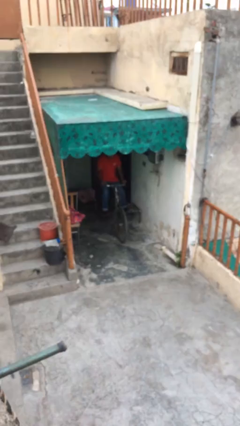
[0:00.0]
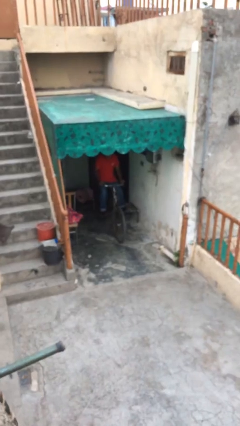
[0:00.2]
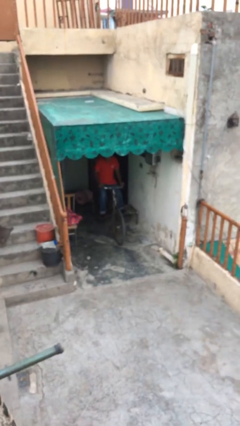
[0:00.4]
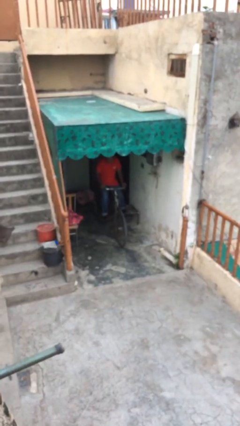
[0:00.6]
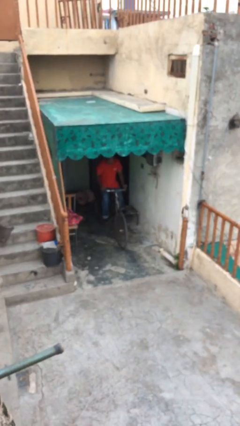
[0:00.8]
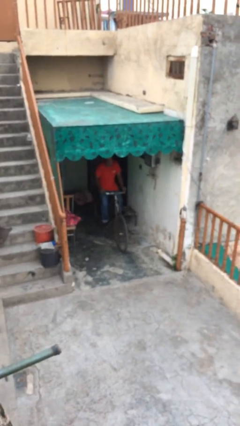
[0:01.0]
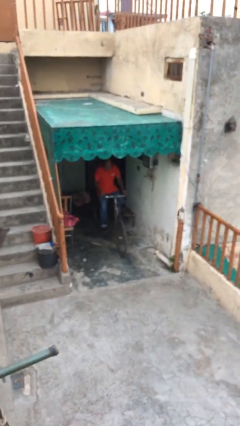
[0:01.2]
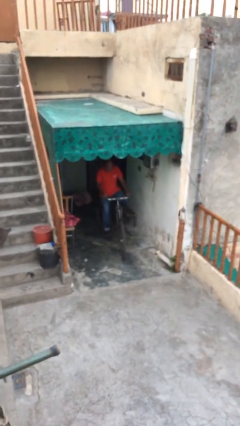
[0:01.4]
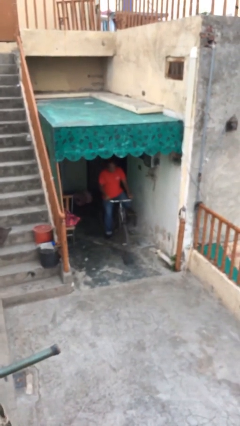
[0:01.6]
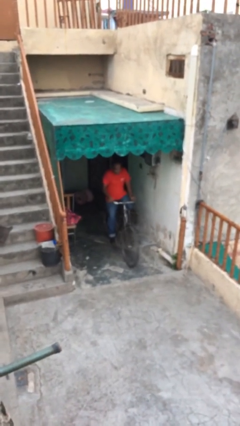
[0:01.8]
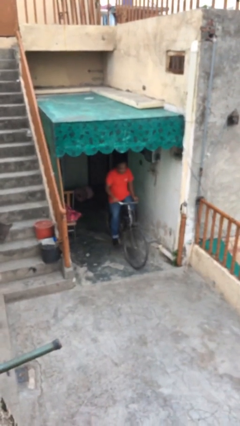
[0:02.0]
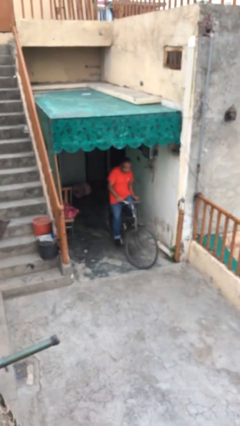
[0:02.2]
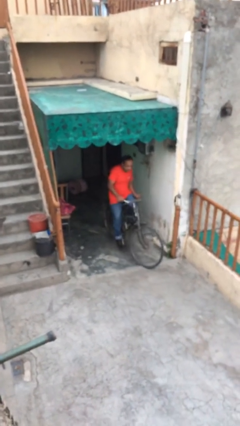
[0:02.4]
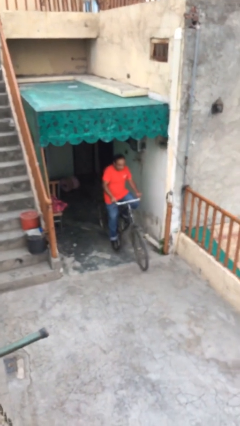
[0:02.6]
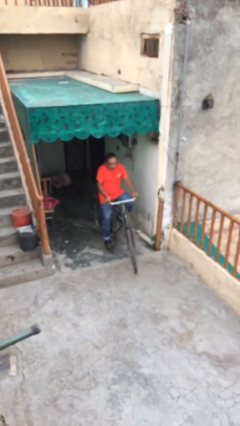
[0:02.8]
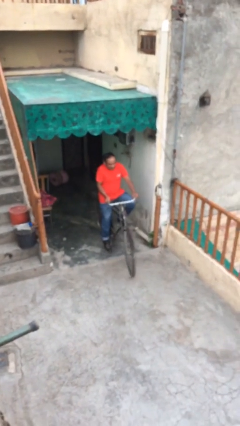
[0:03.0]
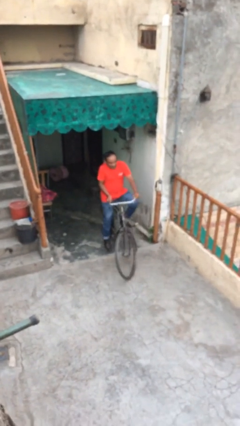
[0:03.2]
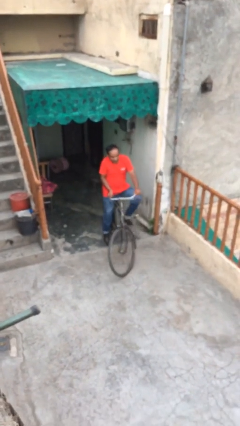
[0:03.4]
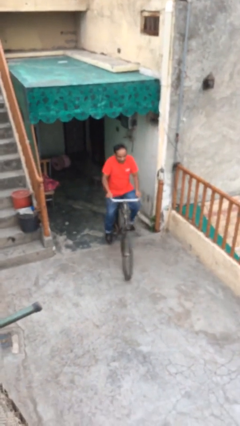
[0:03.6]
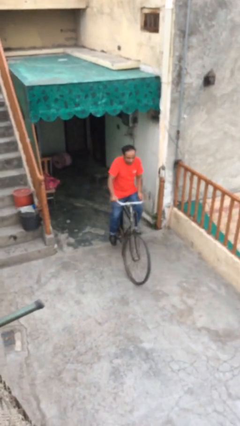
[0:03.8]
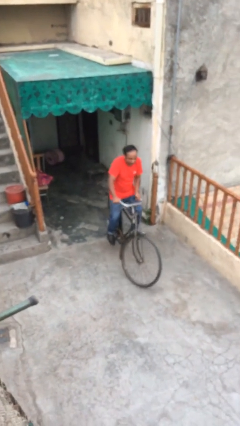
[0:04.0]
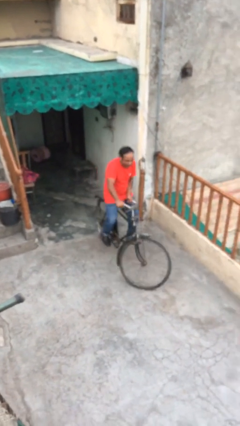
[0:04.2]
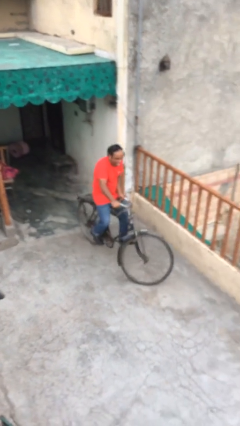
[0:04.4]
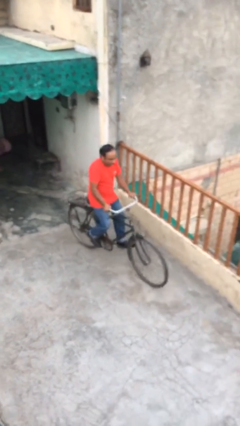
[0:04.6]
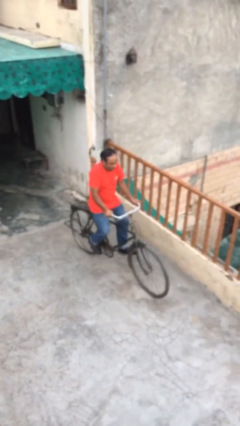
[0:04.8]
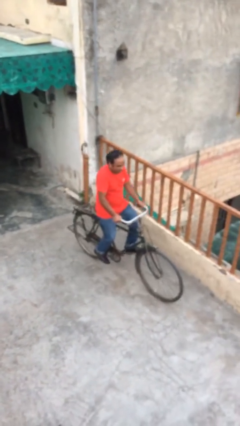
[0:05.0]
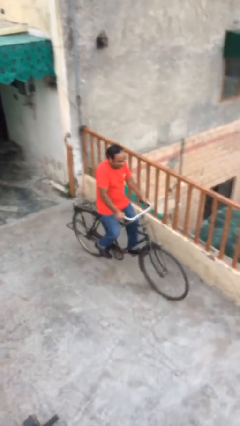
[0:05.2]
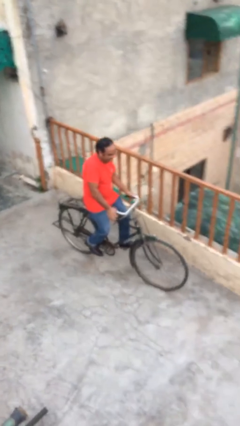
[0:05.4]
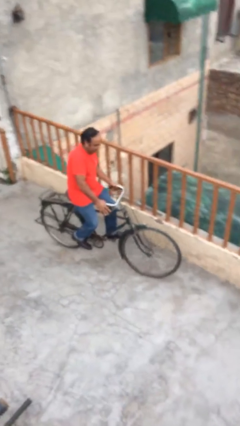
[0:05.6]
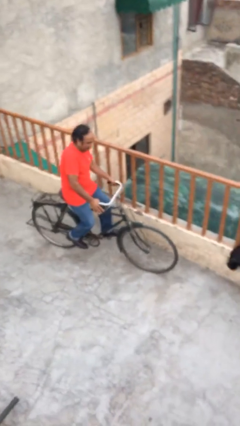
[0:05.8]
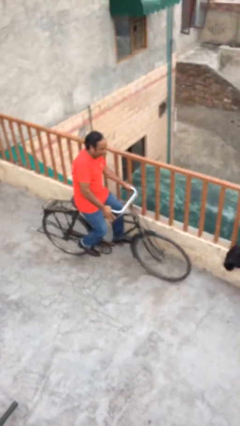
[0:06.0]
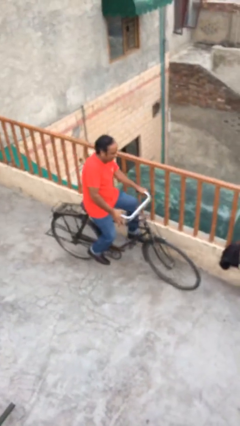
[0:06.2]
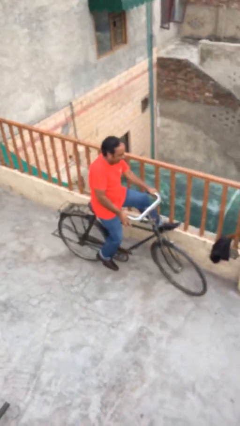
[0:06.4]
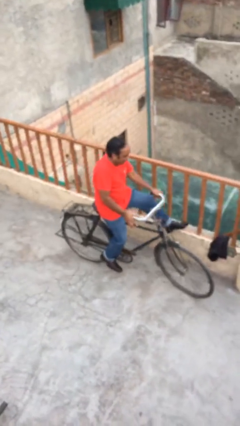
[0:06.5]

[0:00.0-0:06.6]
person rides bicycle

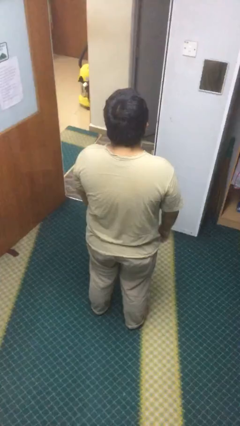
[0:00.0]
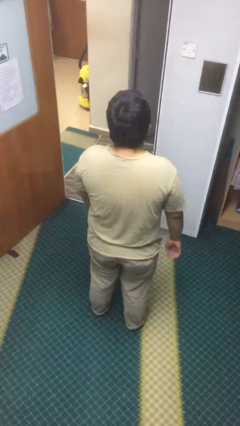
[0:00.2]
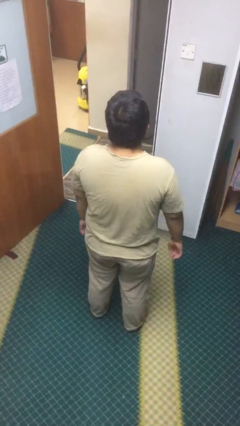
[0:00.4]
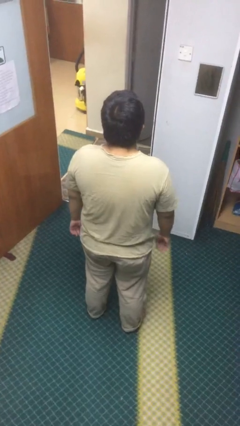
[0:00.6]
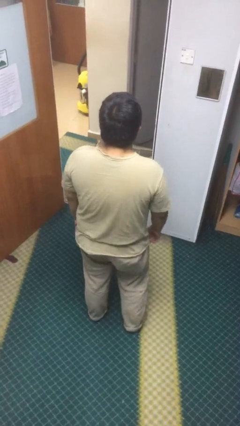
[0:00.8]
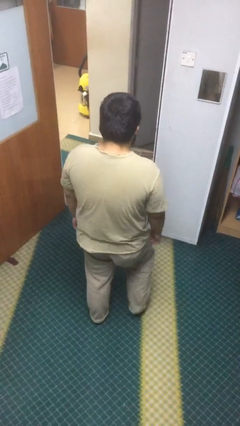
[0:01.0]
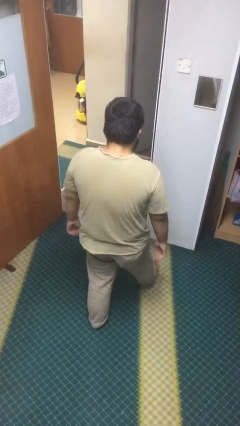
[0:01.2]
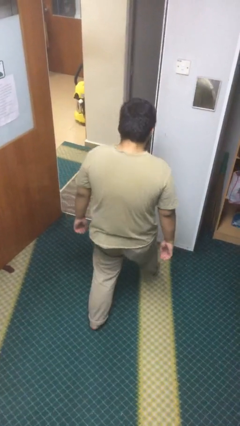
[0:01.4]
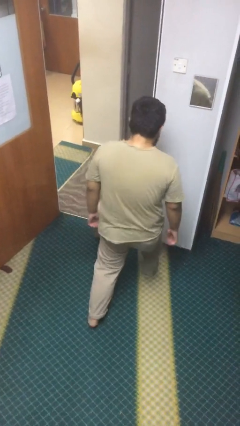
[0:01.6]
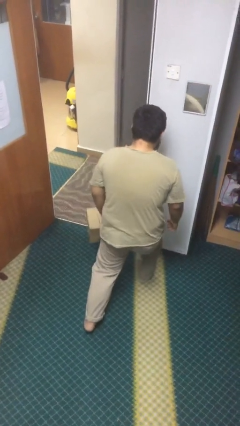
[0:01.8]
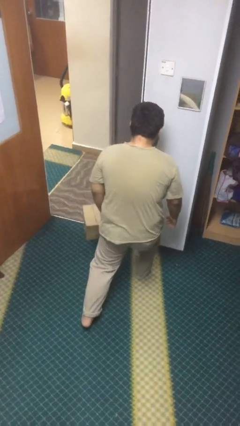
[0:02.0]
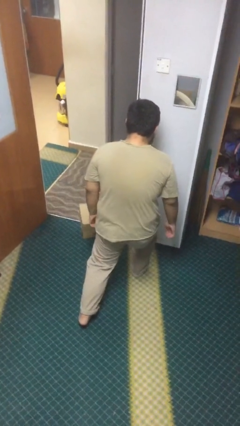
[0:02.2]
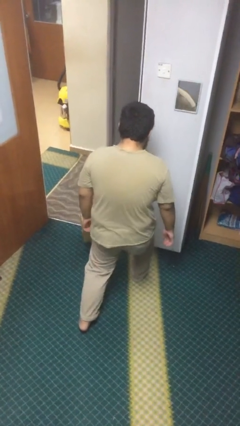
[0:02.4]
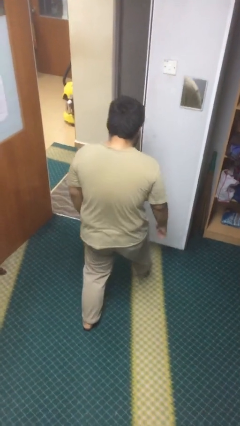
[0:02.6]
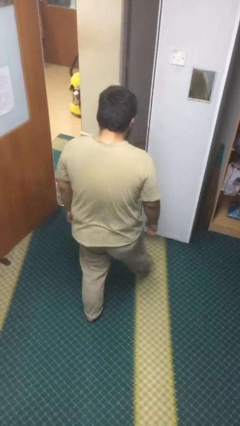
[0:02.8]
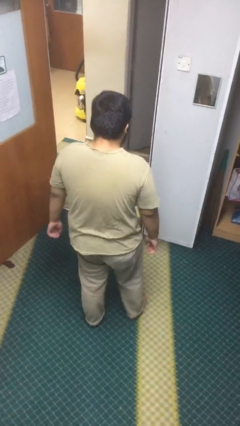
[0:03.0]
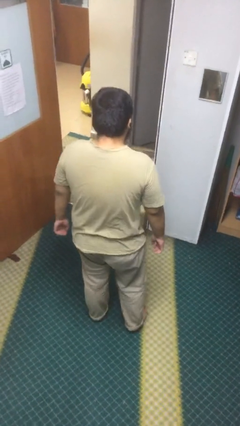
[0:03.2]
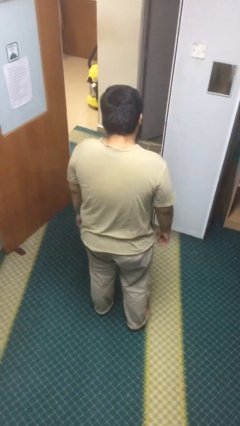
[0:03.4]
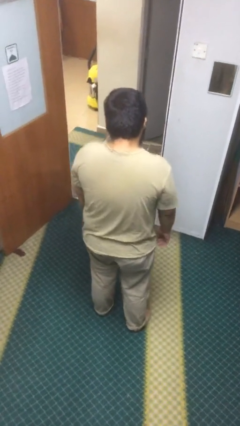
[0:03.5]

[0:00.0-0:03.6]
person exercises with lunges

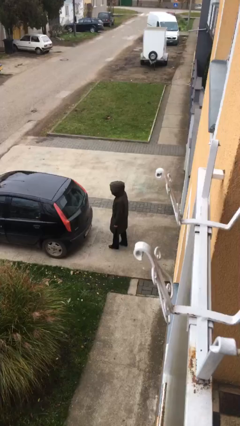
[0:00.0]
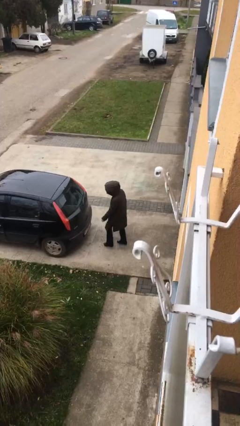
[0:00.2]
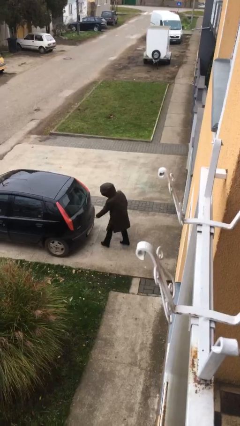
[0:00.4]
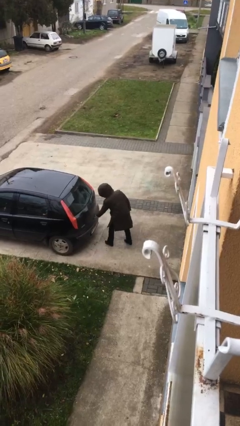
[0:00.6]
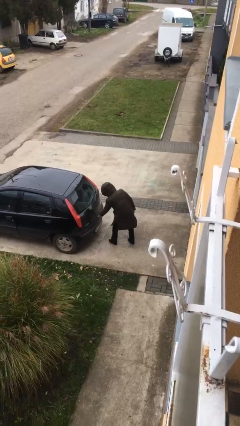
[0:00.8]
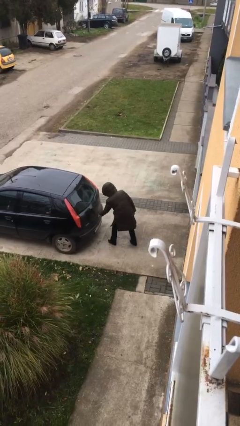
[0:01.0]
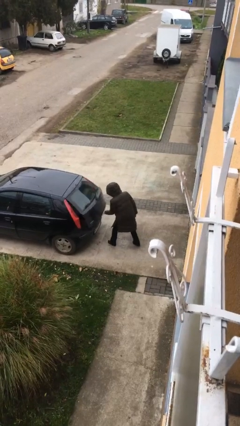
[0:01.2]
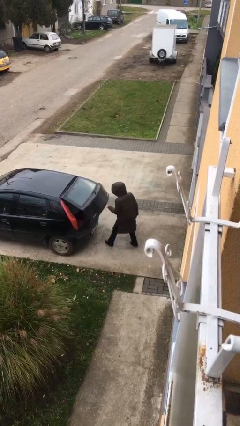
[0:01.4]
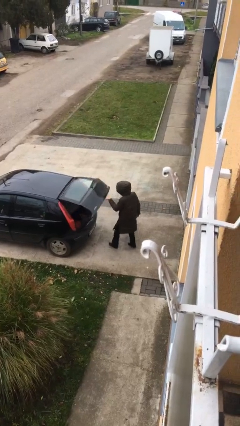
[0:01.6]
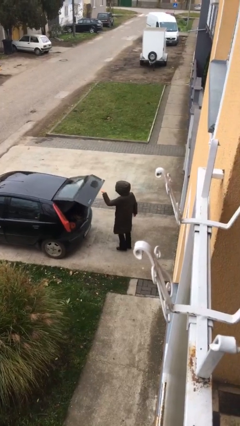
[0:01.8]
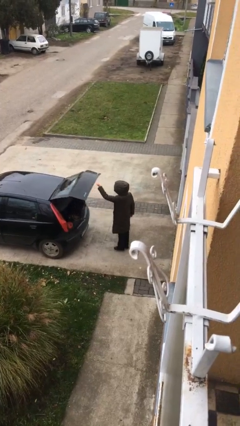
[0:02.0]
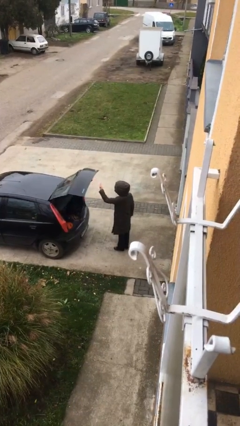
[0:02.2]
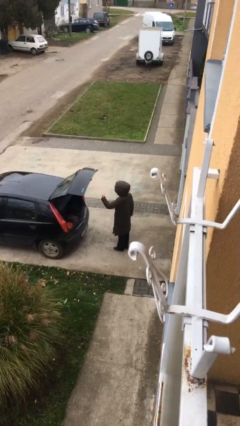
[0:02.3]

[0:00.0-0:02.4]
person opens car trunk

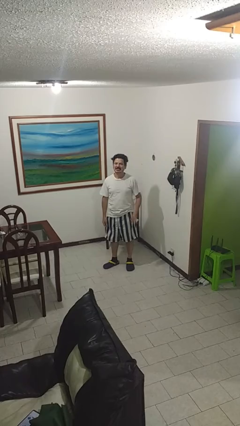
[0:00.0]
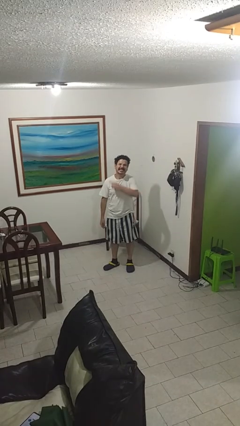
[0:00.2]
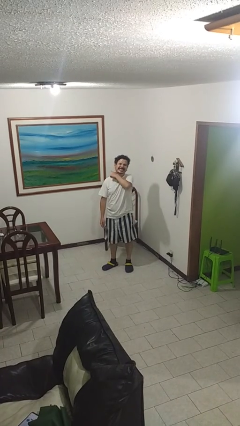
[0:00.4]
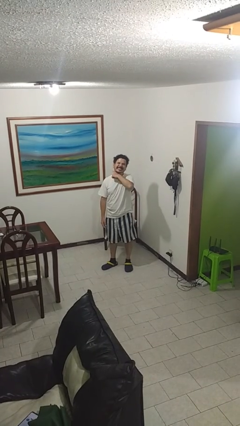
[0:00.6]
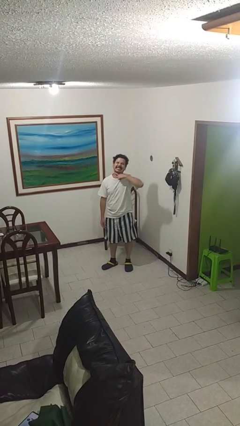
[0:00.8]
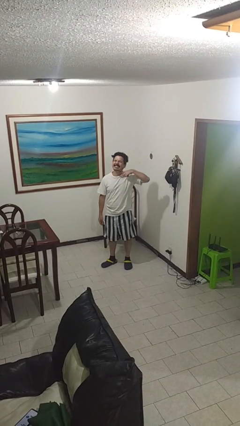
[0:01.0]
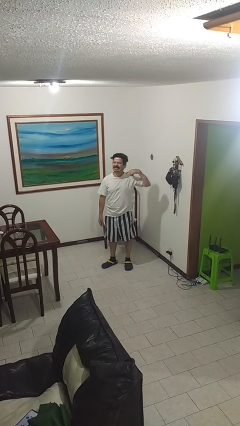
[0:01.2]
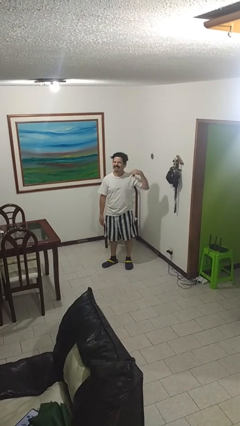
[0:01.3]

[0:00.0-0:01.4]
person gestures cut

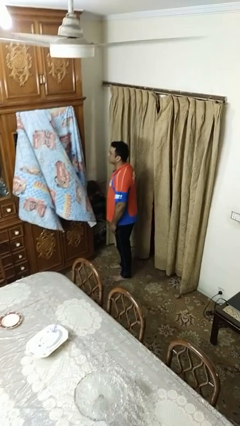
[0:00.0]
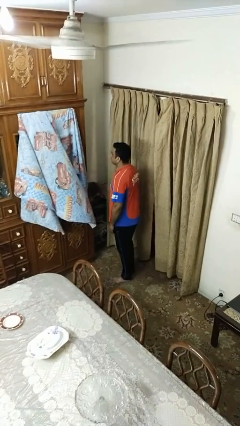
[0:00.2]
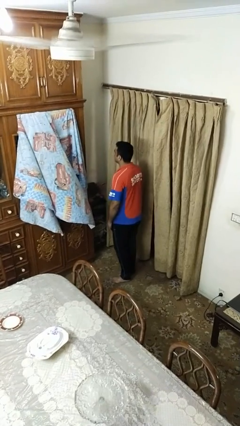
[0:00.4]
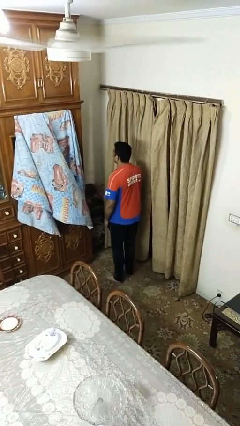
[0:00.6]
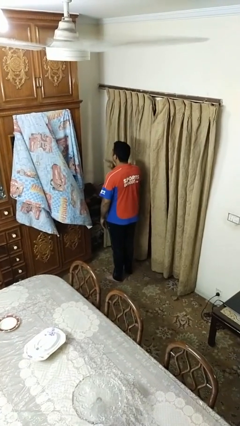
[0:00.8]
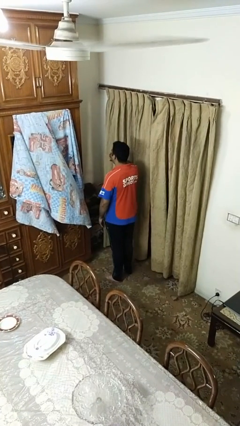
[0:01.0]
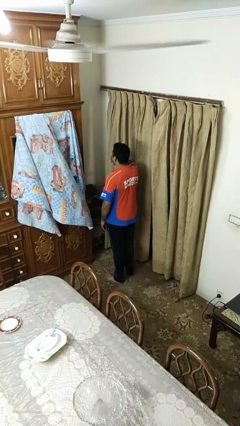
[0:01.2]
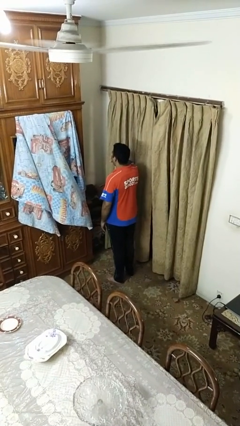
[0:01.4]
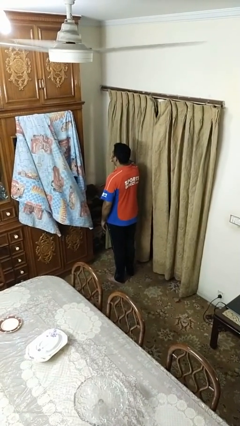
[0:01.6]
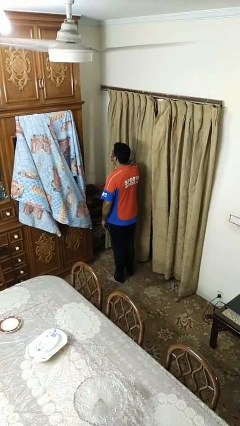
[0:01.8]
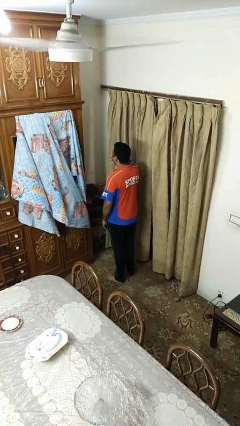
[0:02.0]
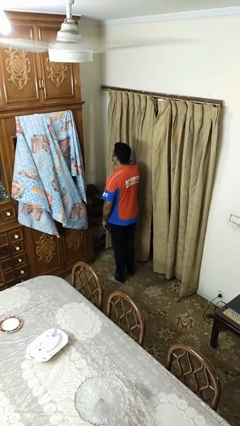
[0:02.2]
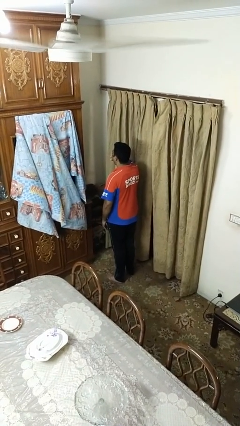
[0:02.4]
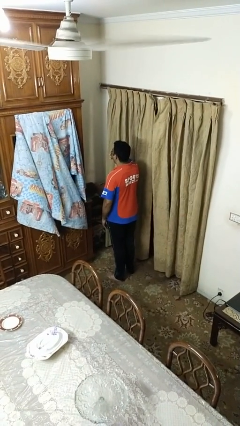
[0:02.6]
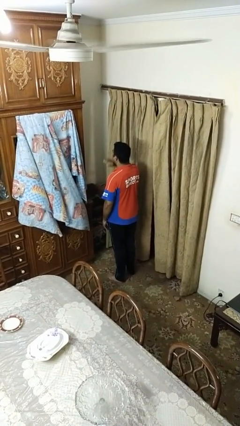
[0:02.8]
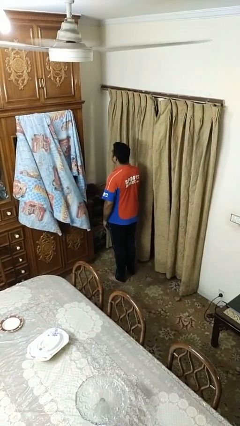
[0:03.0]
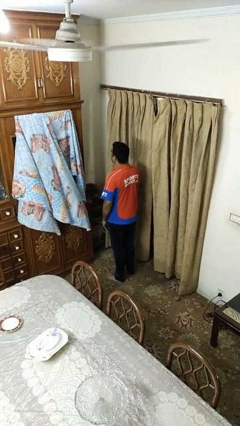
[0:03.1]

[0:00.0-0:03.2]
person yawns

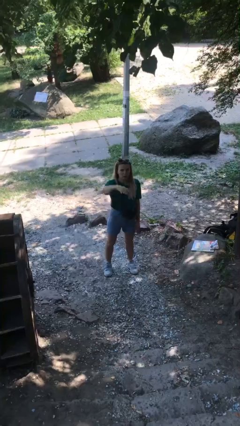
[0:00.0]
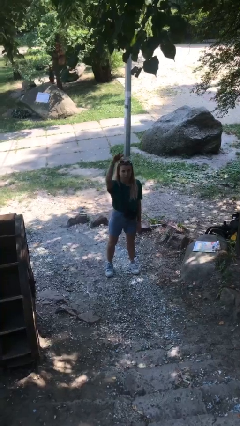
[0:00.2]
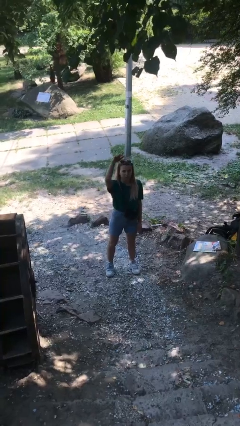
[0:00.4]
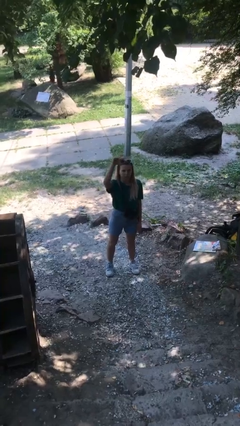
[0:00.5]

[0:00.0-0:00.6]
person gestures swipe up
